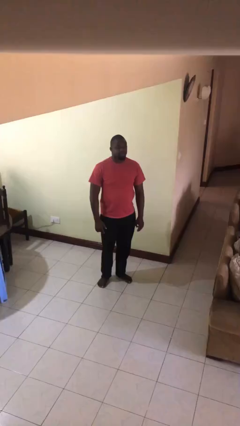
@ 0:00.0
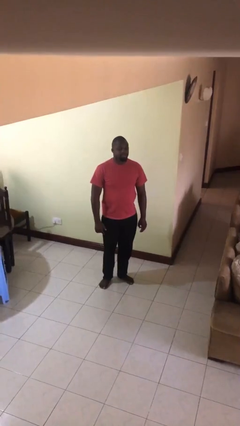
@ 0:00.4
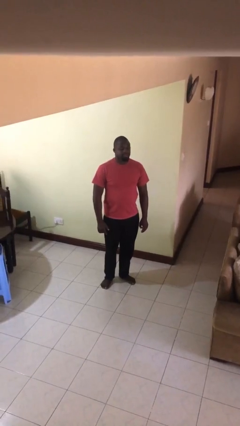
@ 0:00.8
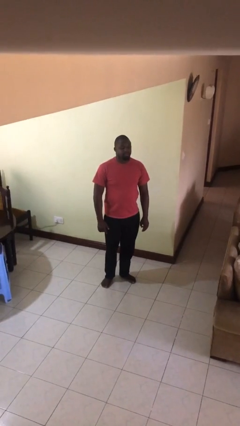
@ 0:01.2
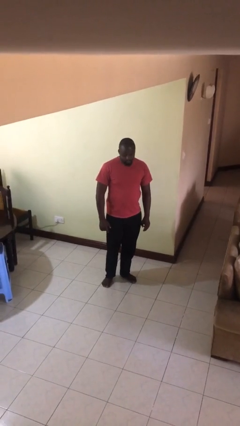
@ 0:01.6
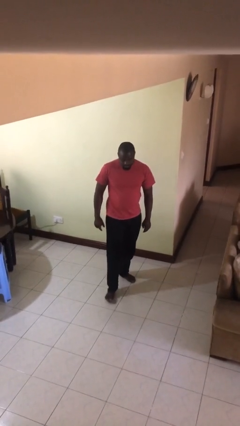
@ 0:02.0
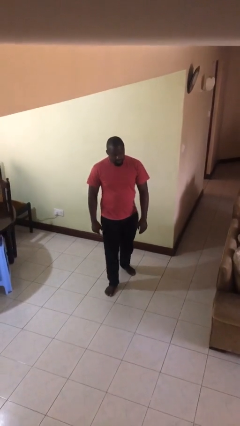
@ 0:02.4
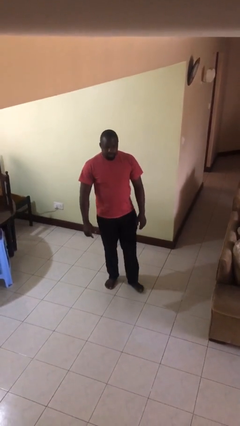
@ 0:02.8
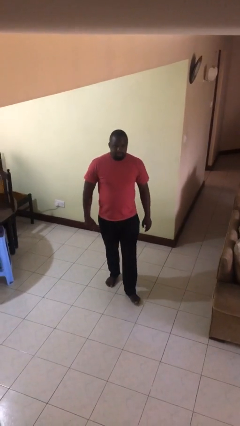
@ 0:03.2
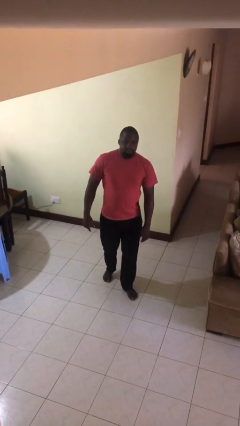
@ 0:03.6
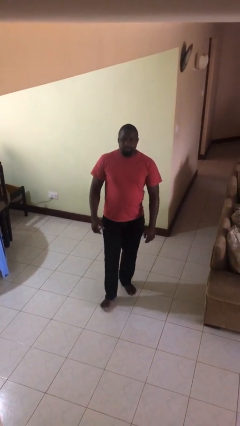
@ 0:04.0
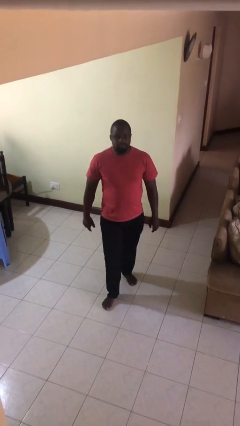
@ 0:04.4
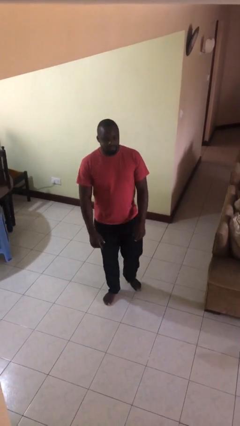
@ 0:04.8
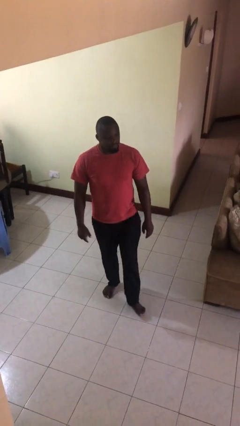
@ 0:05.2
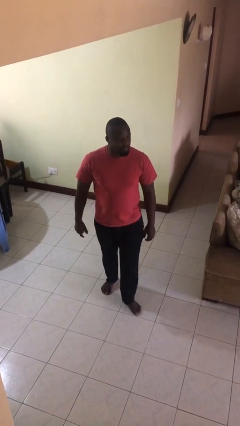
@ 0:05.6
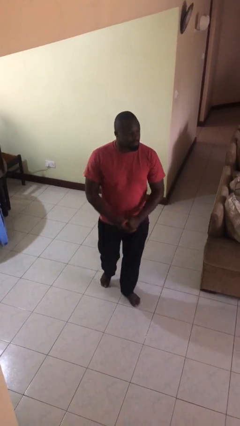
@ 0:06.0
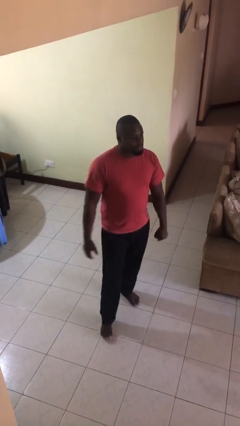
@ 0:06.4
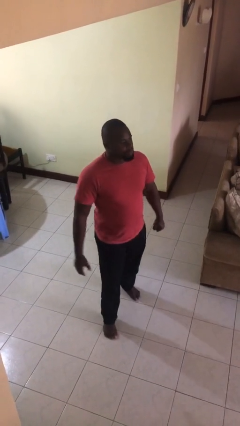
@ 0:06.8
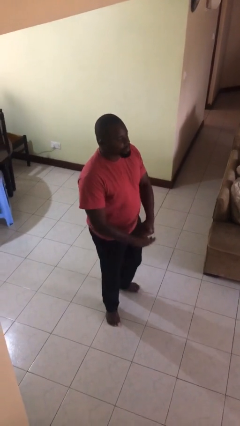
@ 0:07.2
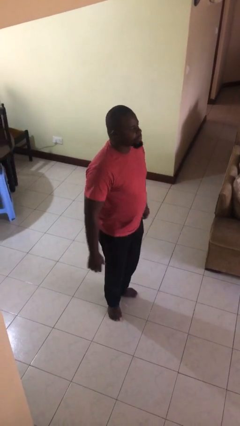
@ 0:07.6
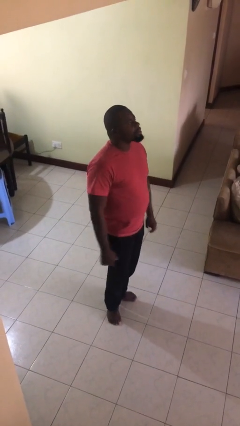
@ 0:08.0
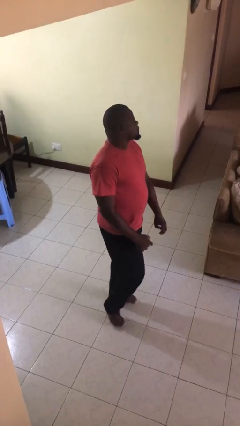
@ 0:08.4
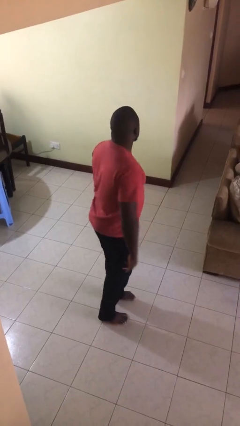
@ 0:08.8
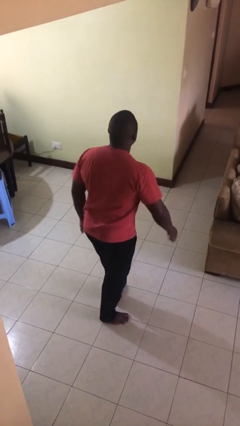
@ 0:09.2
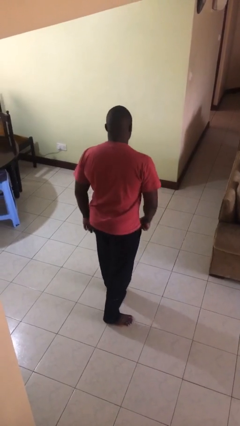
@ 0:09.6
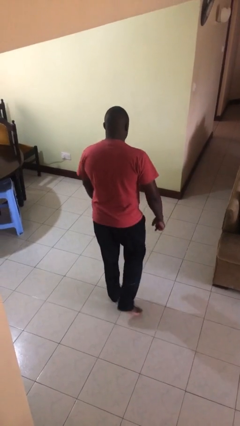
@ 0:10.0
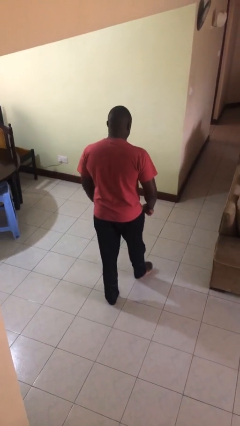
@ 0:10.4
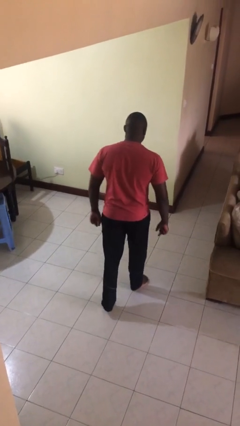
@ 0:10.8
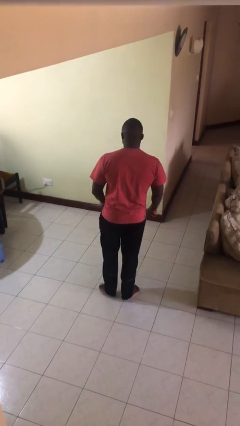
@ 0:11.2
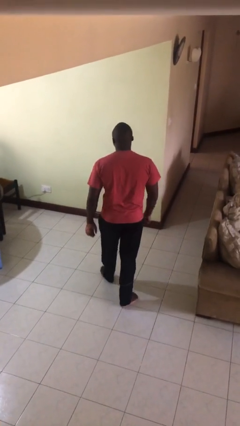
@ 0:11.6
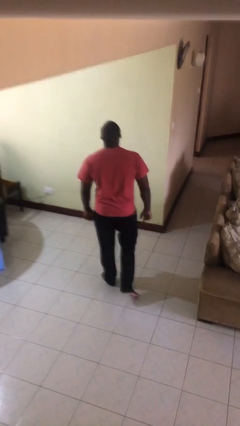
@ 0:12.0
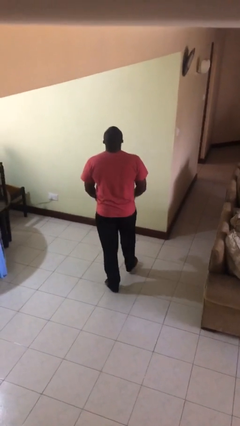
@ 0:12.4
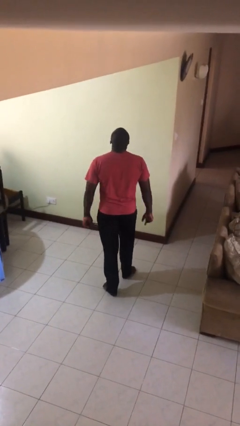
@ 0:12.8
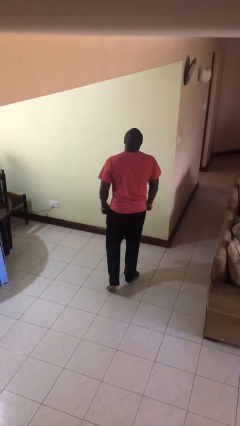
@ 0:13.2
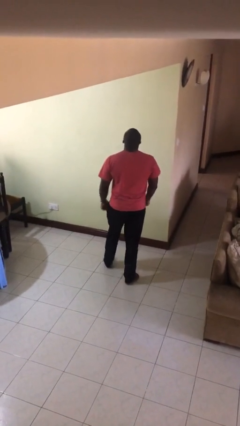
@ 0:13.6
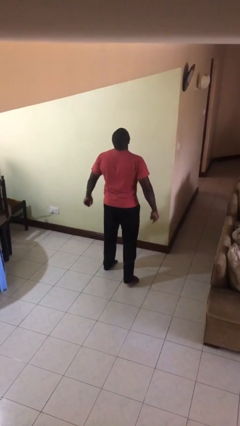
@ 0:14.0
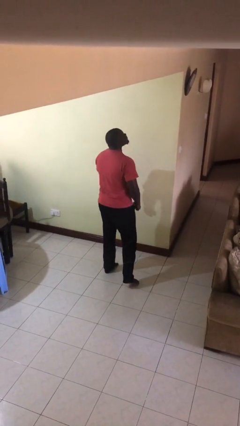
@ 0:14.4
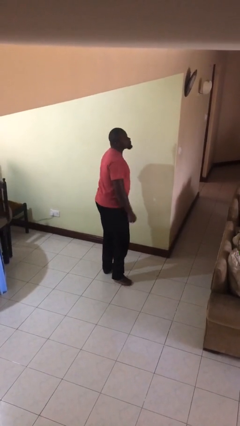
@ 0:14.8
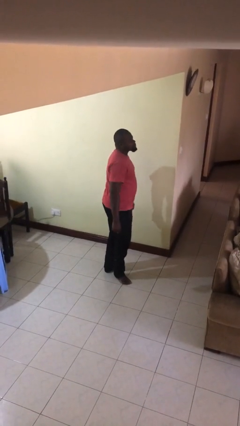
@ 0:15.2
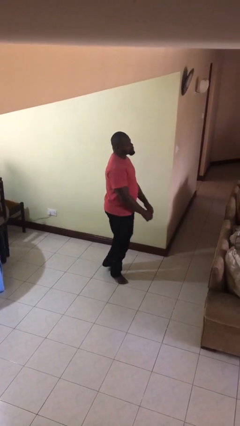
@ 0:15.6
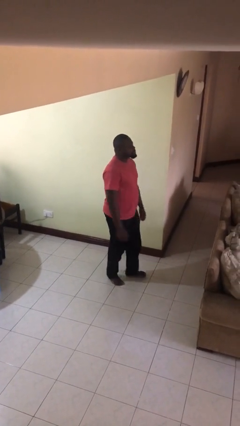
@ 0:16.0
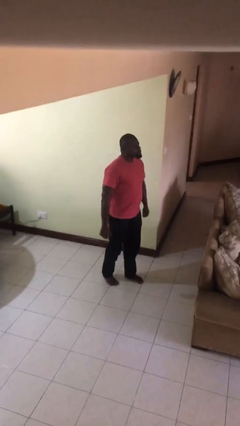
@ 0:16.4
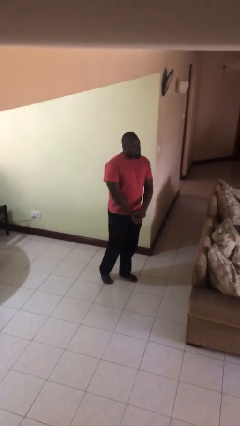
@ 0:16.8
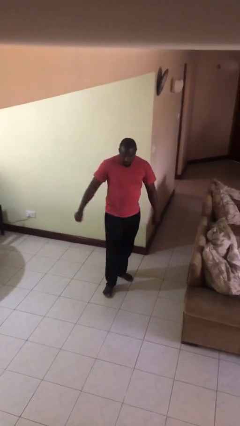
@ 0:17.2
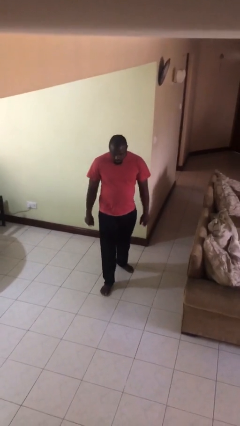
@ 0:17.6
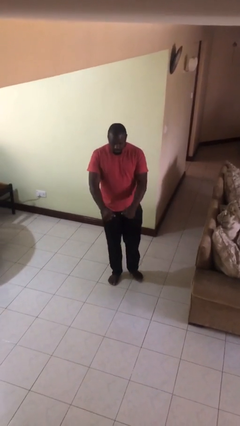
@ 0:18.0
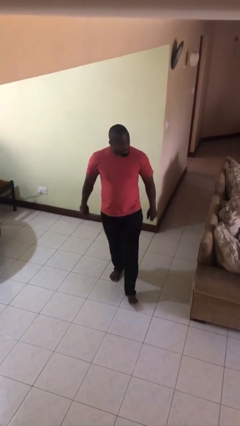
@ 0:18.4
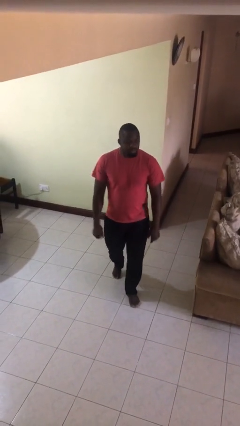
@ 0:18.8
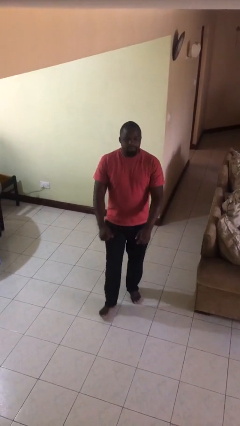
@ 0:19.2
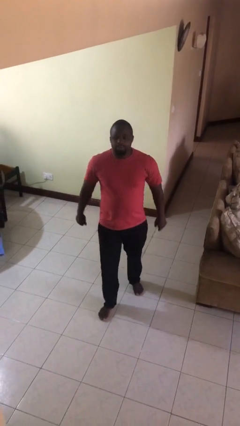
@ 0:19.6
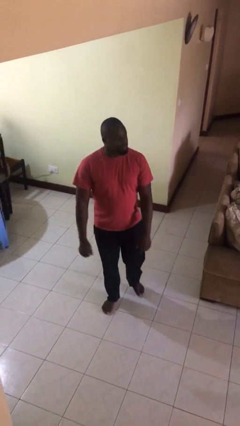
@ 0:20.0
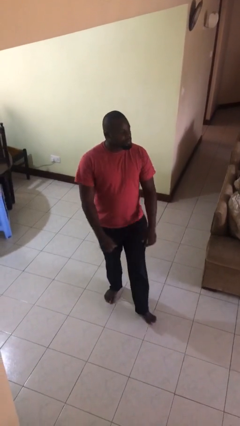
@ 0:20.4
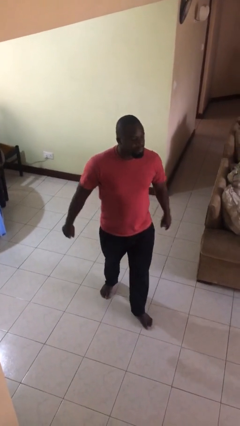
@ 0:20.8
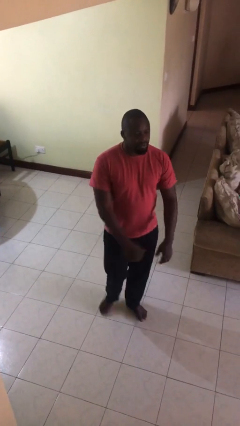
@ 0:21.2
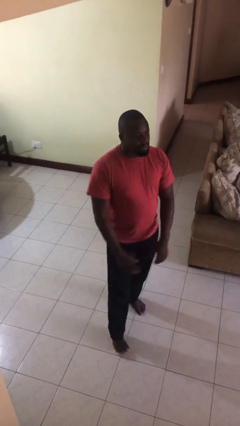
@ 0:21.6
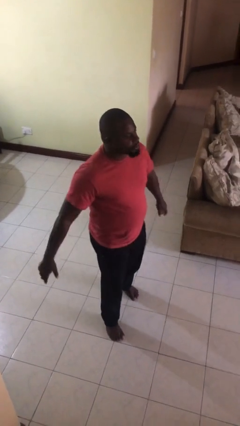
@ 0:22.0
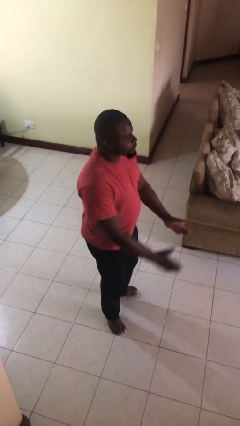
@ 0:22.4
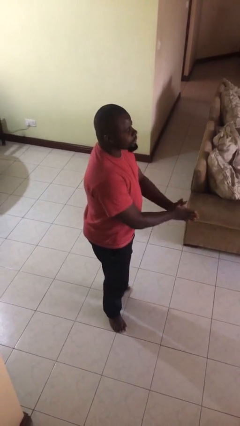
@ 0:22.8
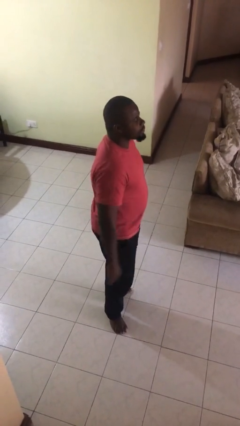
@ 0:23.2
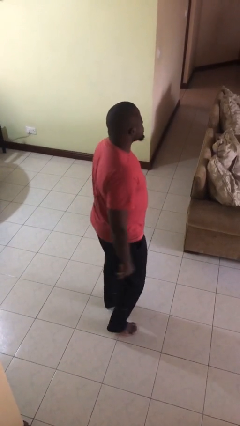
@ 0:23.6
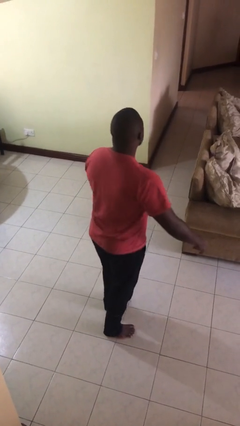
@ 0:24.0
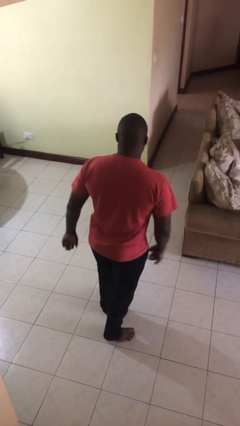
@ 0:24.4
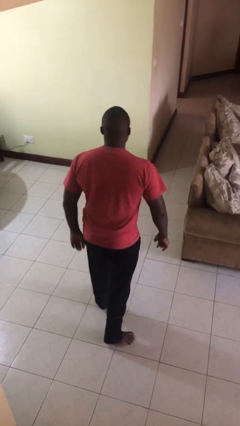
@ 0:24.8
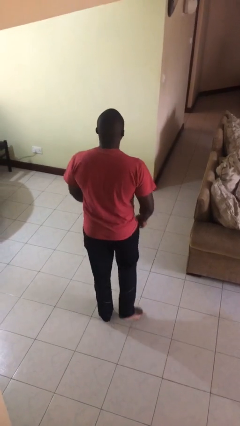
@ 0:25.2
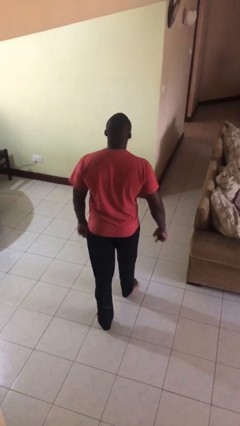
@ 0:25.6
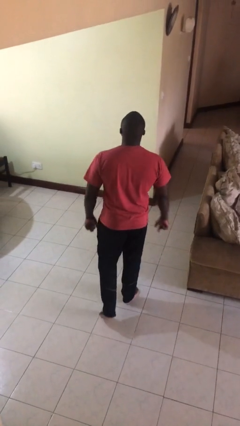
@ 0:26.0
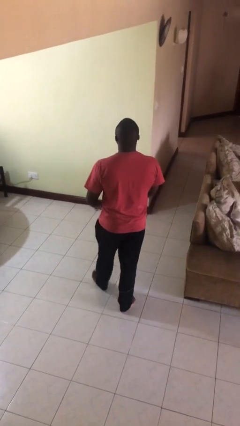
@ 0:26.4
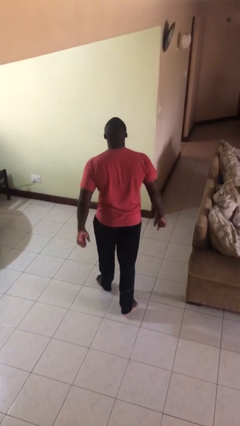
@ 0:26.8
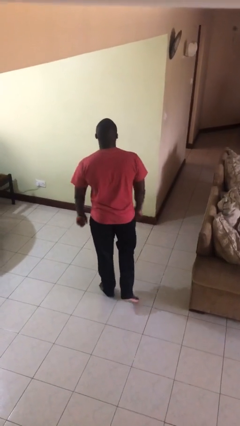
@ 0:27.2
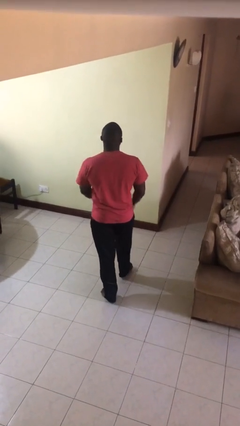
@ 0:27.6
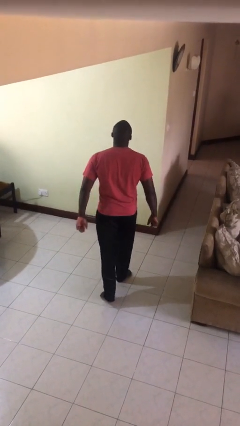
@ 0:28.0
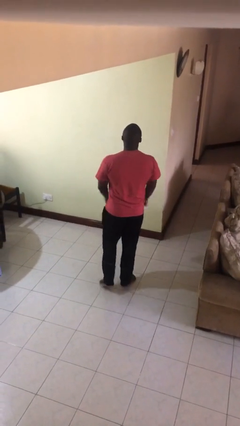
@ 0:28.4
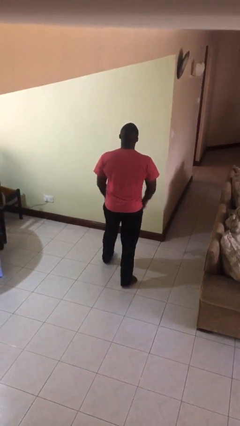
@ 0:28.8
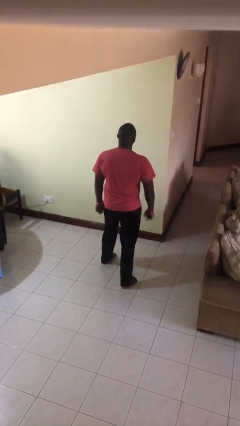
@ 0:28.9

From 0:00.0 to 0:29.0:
person walks

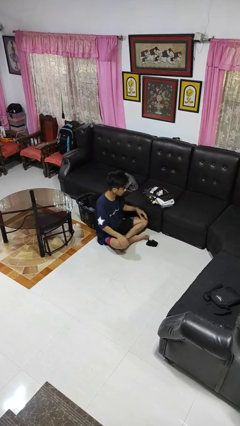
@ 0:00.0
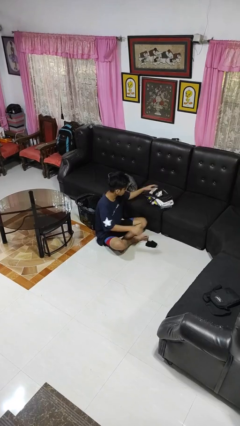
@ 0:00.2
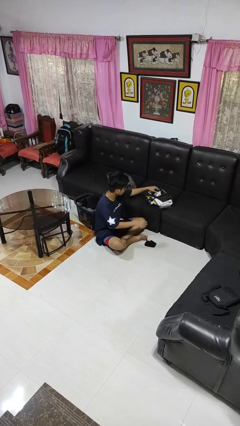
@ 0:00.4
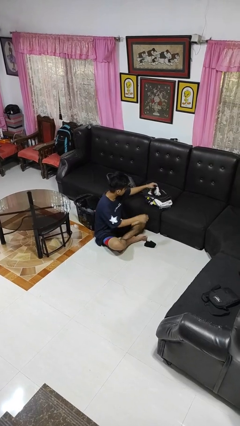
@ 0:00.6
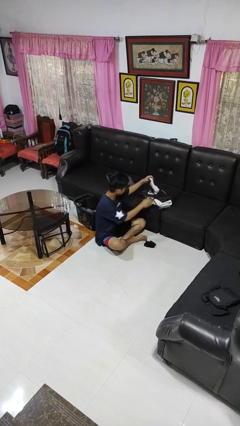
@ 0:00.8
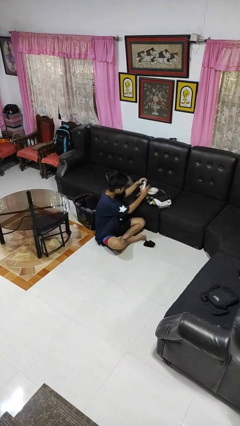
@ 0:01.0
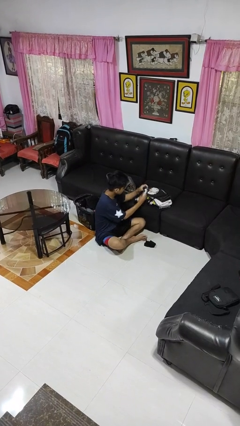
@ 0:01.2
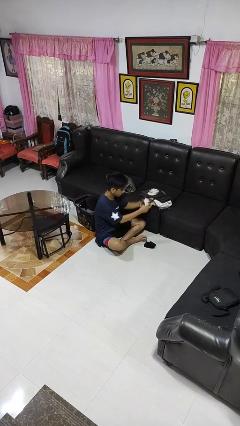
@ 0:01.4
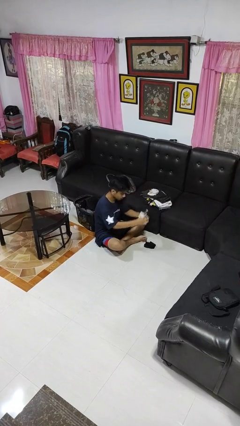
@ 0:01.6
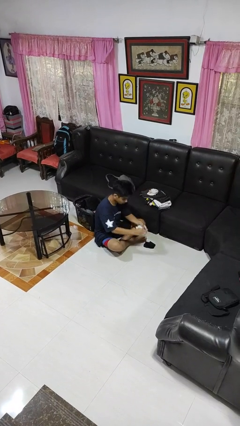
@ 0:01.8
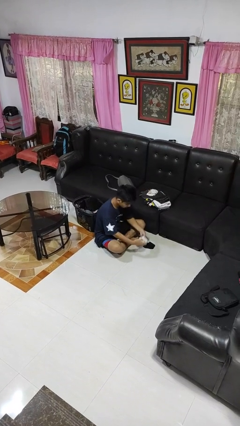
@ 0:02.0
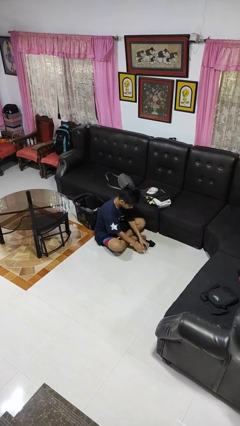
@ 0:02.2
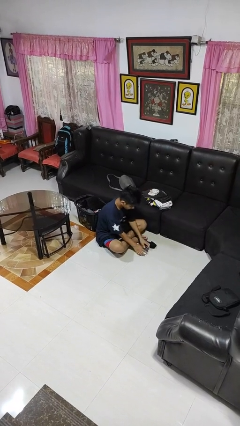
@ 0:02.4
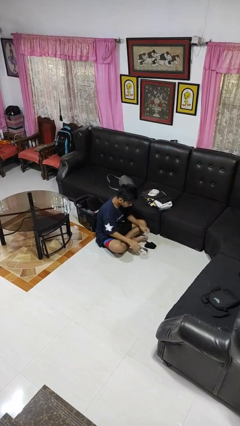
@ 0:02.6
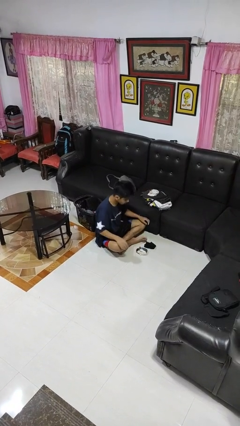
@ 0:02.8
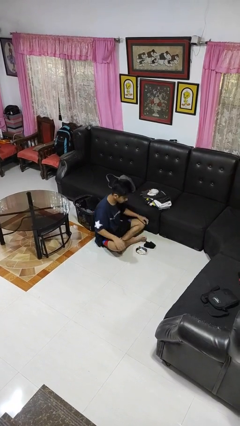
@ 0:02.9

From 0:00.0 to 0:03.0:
person folds socks

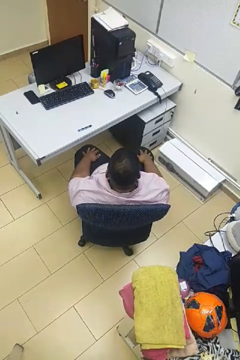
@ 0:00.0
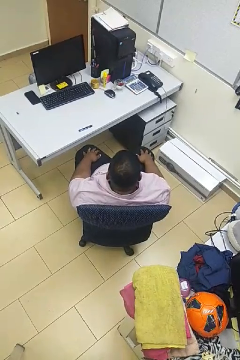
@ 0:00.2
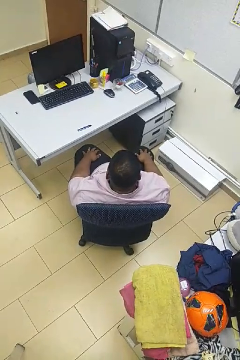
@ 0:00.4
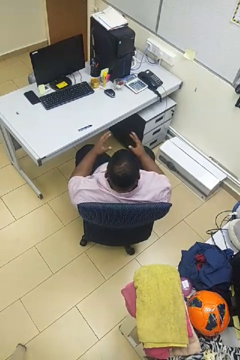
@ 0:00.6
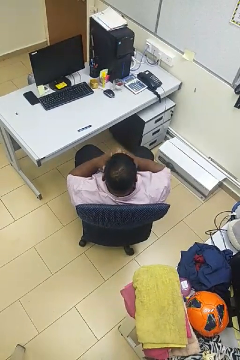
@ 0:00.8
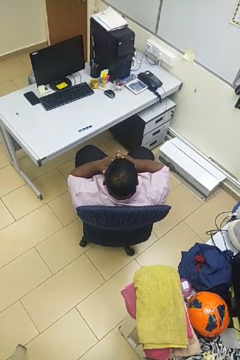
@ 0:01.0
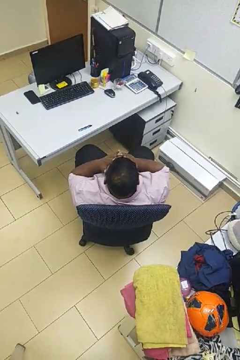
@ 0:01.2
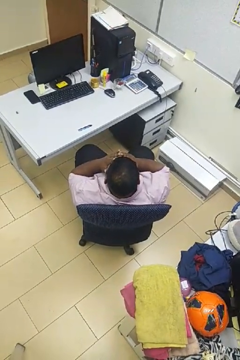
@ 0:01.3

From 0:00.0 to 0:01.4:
person covers face with hands
